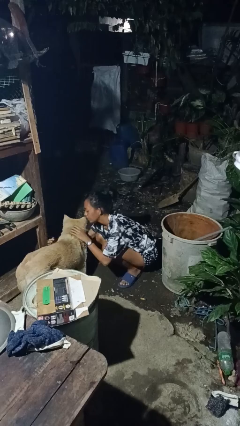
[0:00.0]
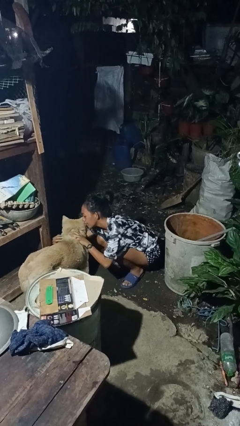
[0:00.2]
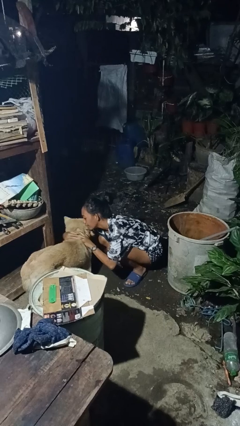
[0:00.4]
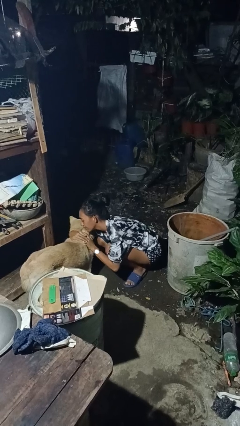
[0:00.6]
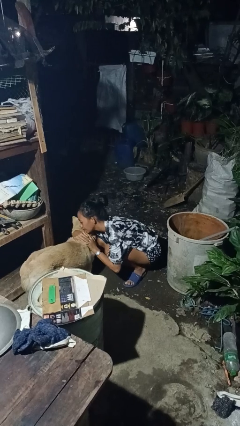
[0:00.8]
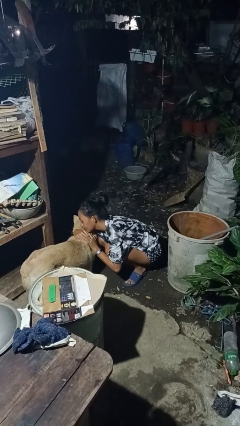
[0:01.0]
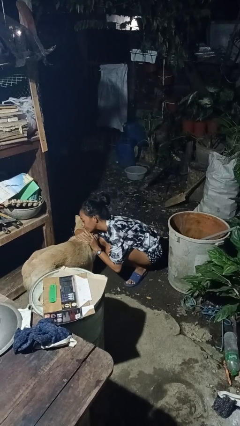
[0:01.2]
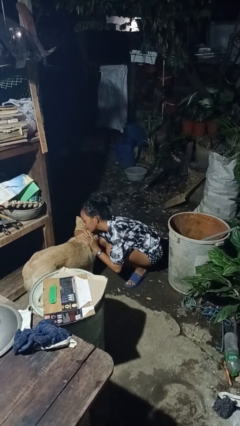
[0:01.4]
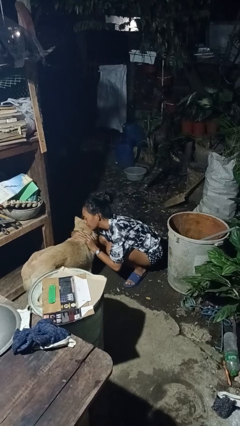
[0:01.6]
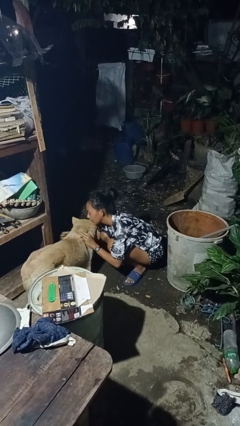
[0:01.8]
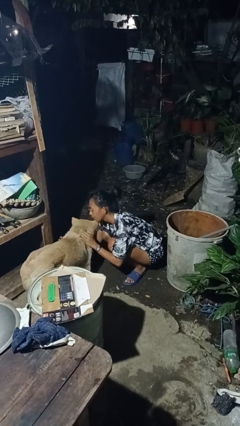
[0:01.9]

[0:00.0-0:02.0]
person hugs dog

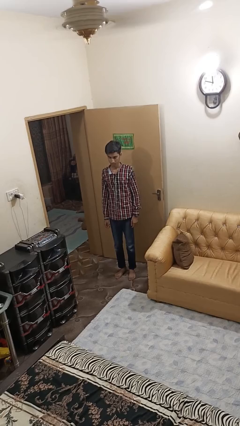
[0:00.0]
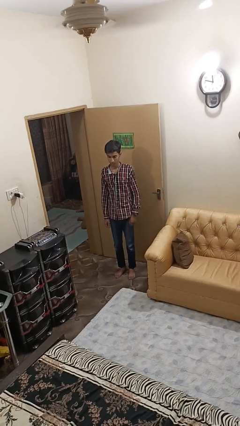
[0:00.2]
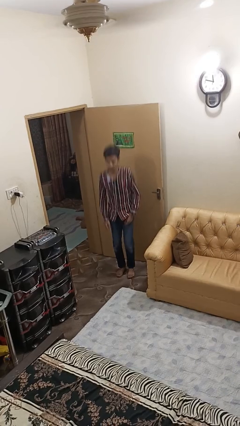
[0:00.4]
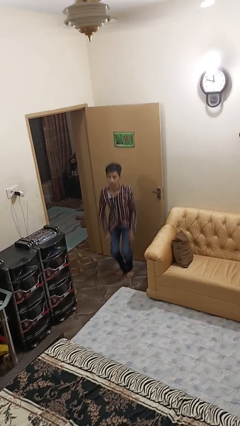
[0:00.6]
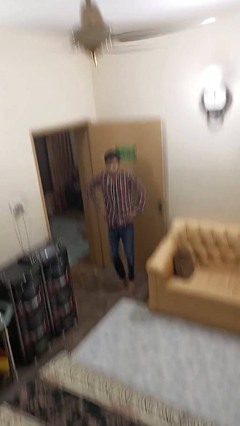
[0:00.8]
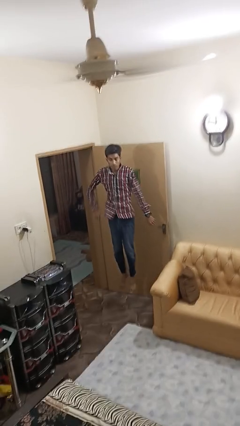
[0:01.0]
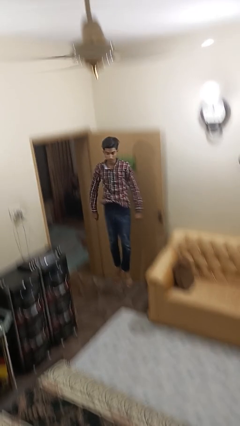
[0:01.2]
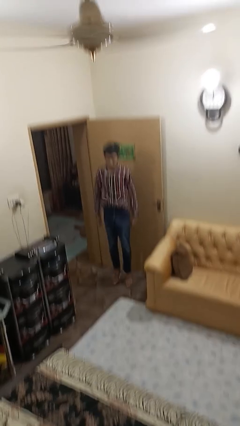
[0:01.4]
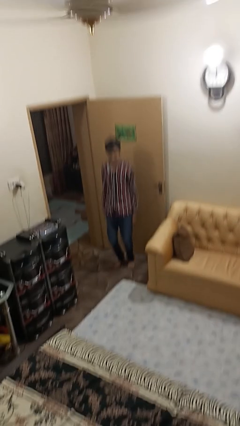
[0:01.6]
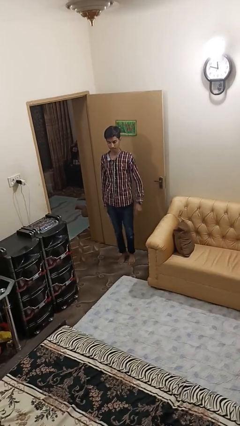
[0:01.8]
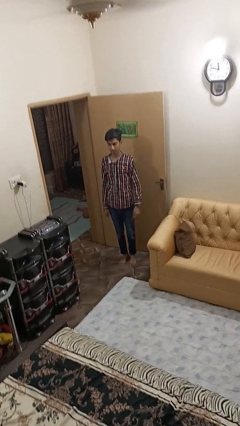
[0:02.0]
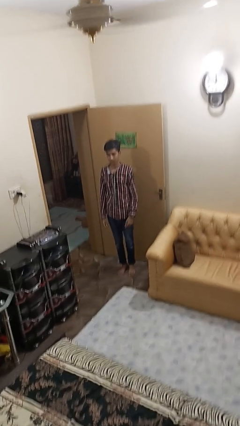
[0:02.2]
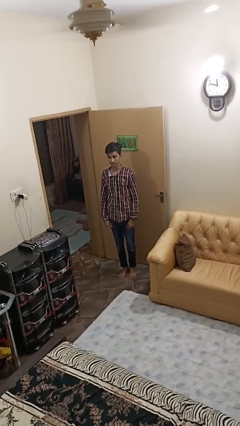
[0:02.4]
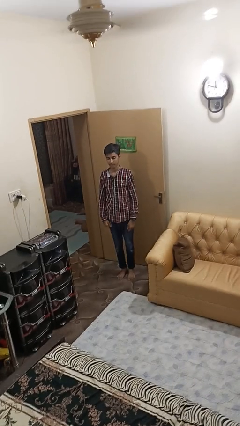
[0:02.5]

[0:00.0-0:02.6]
person jumps

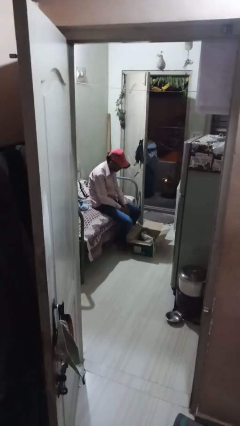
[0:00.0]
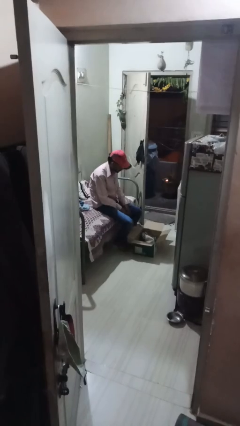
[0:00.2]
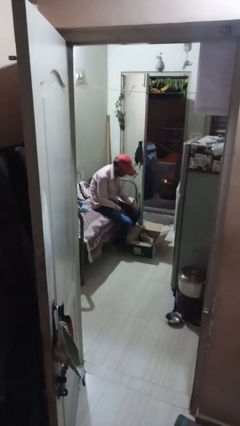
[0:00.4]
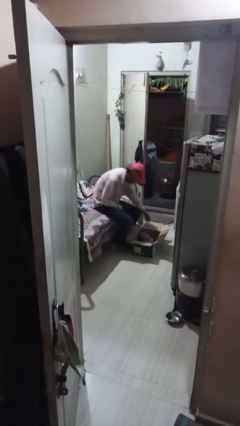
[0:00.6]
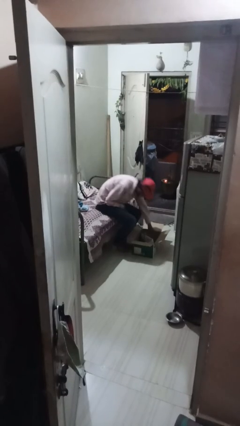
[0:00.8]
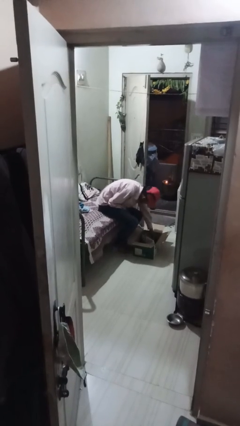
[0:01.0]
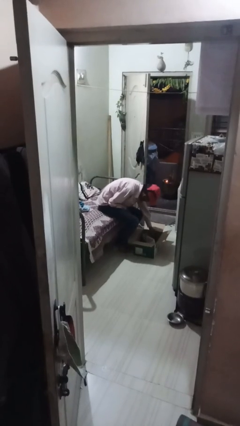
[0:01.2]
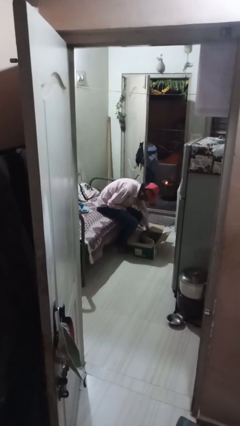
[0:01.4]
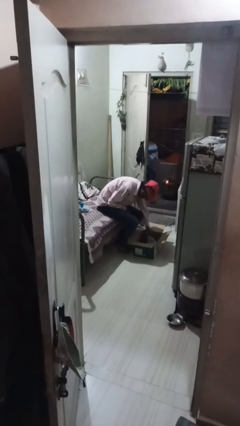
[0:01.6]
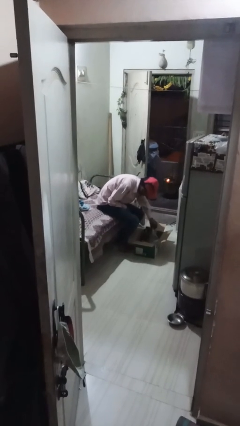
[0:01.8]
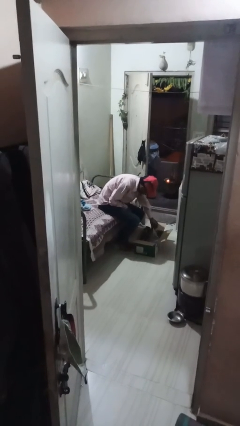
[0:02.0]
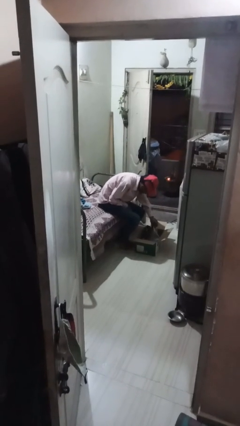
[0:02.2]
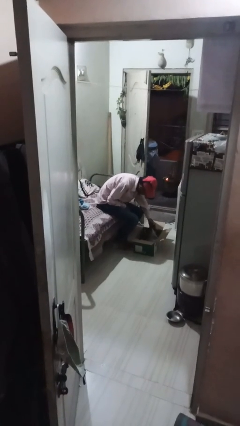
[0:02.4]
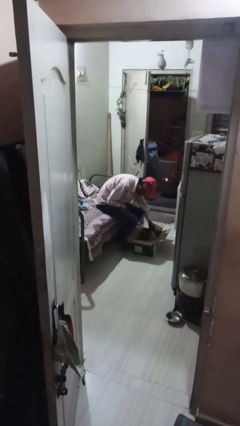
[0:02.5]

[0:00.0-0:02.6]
person searches in box

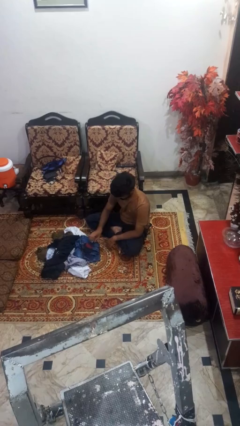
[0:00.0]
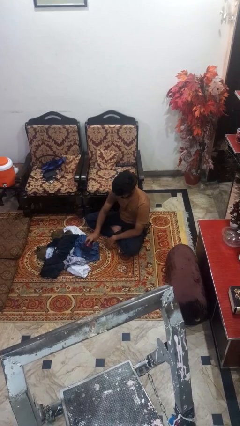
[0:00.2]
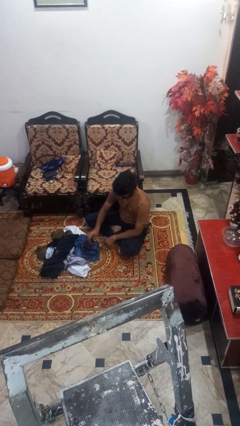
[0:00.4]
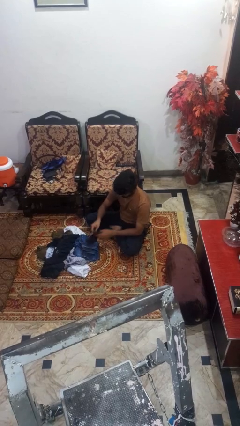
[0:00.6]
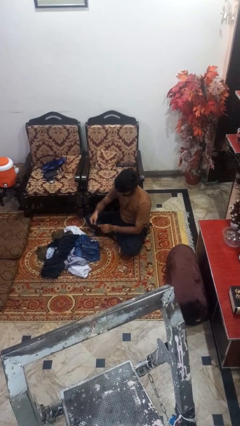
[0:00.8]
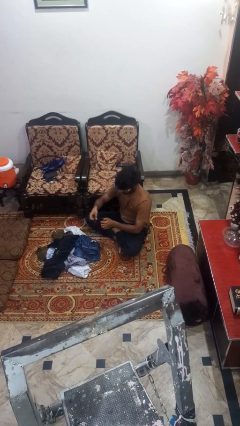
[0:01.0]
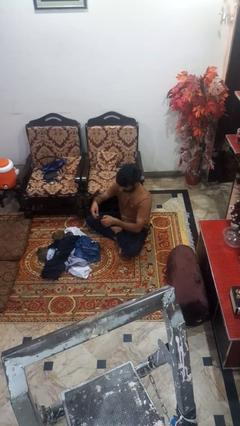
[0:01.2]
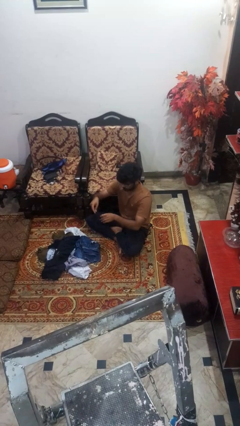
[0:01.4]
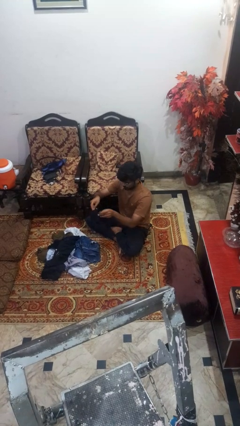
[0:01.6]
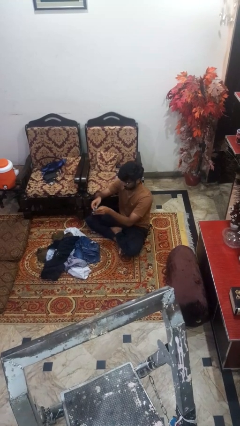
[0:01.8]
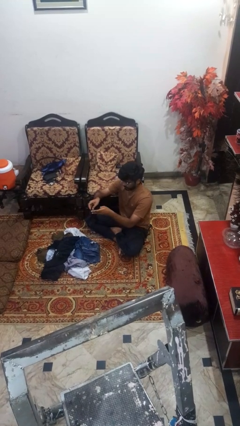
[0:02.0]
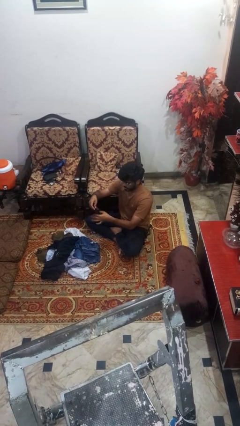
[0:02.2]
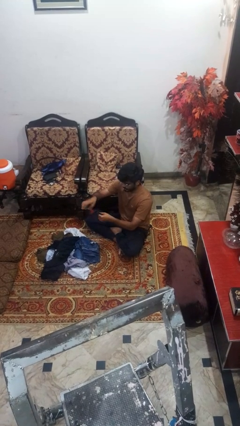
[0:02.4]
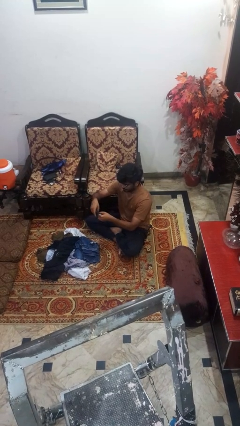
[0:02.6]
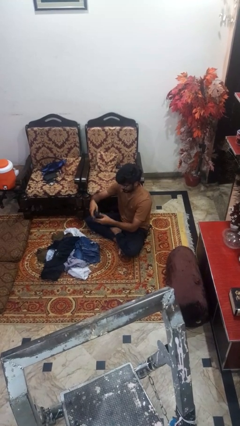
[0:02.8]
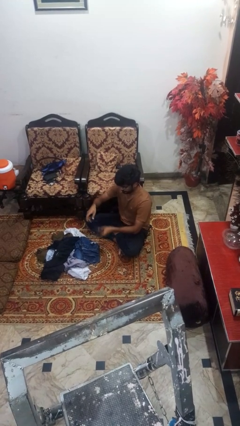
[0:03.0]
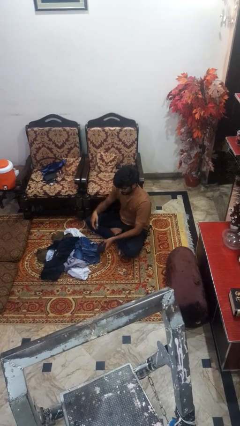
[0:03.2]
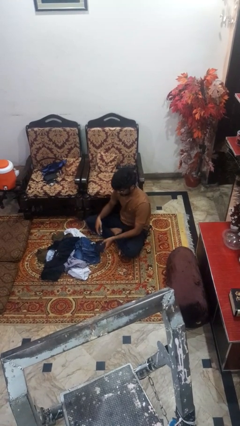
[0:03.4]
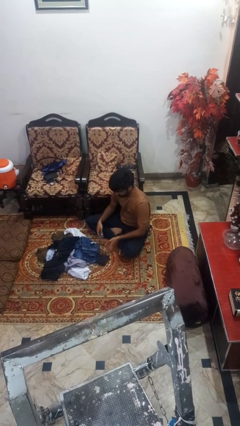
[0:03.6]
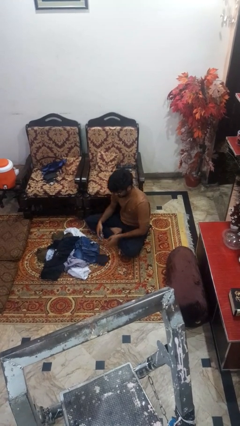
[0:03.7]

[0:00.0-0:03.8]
person folds socks

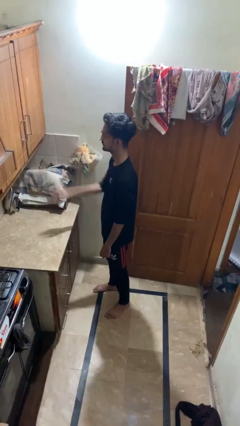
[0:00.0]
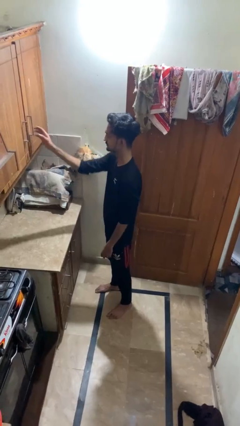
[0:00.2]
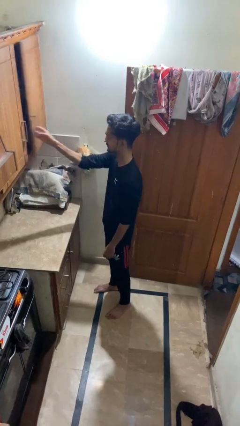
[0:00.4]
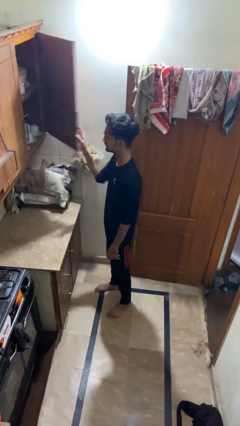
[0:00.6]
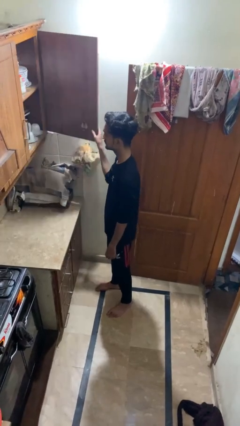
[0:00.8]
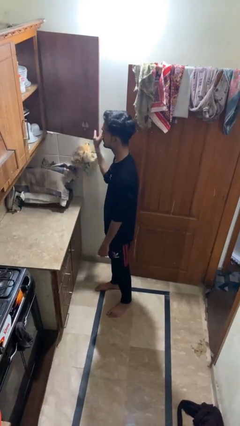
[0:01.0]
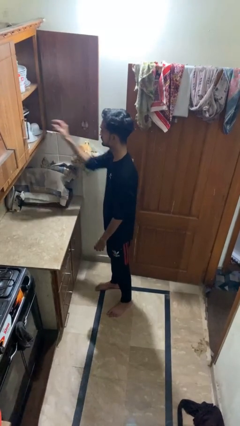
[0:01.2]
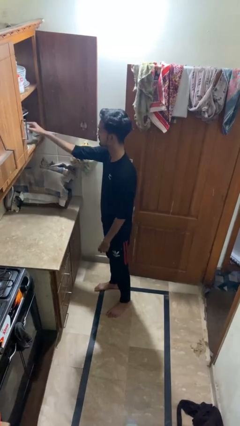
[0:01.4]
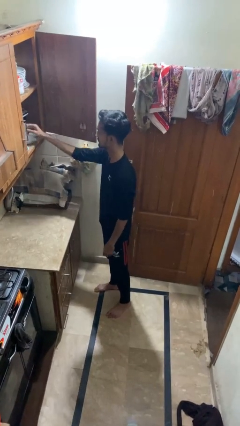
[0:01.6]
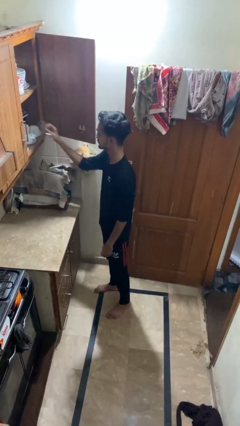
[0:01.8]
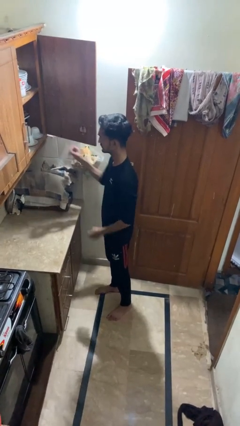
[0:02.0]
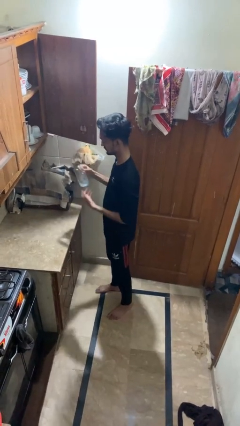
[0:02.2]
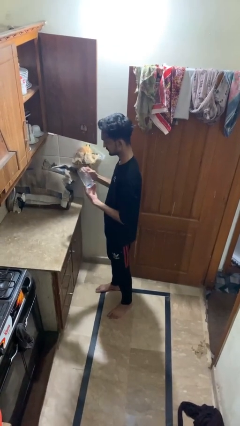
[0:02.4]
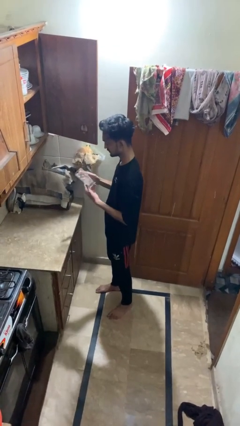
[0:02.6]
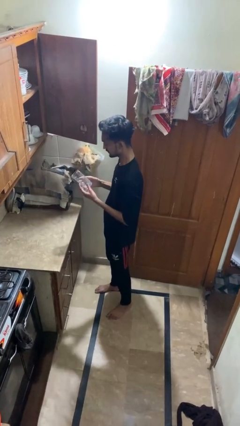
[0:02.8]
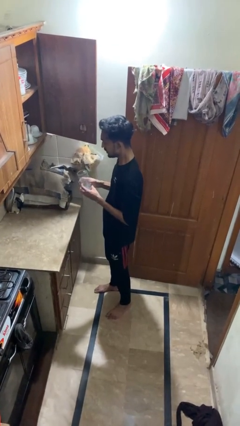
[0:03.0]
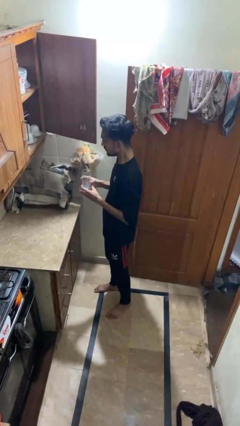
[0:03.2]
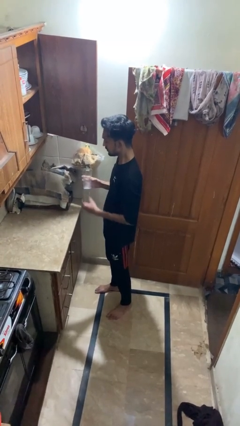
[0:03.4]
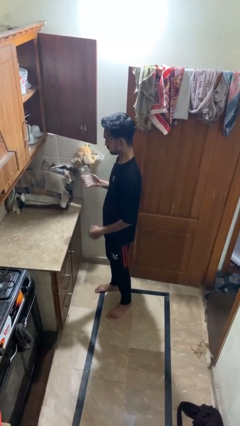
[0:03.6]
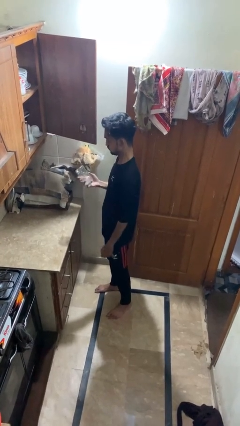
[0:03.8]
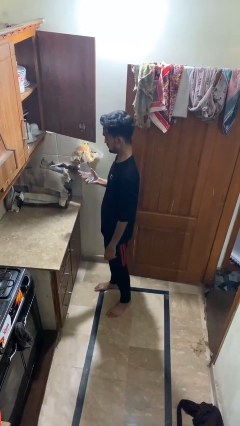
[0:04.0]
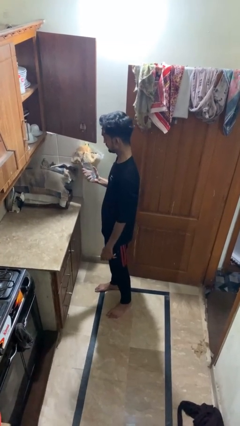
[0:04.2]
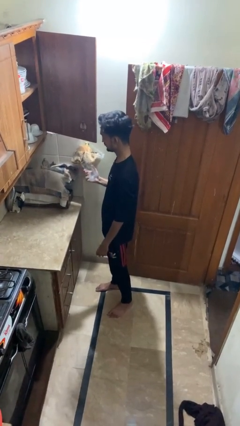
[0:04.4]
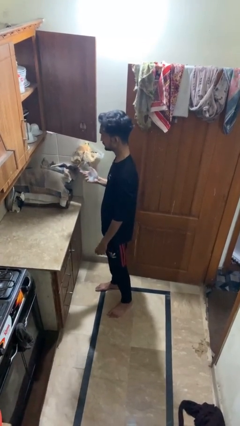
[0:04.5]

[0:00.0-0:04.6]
person puts object in cabinet

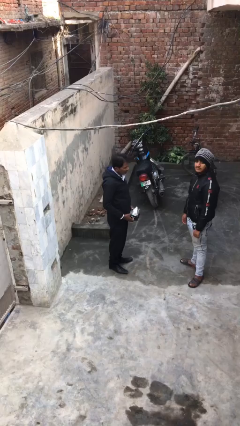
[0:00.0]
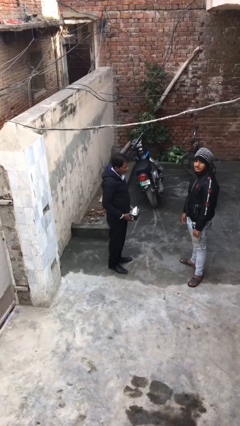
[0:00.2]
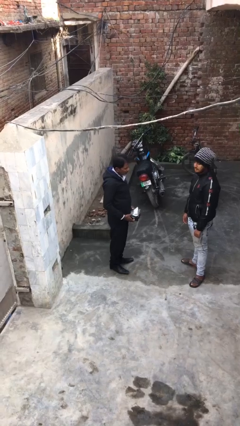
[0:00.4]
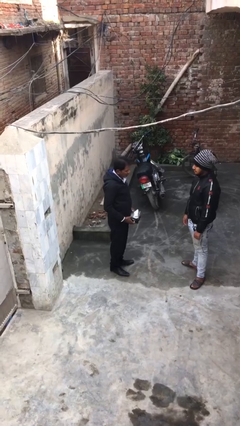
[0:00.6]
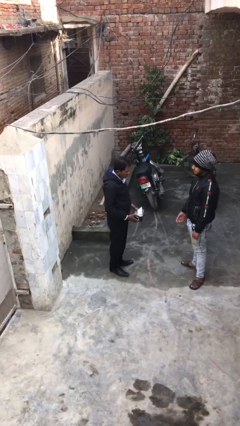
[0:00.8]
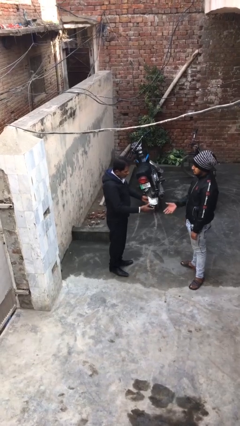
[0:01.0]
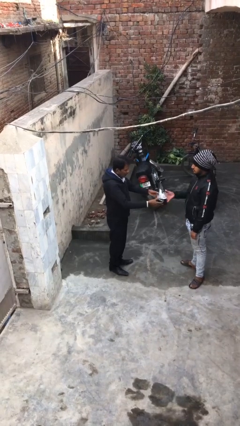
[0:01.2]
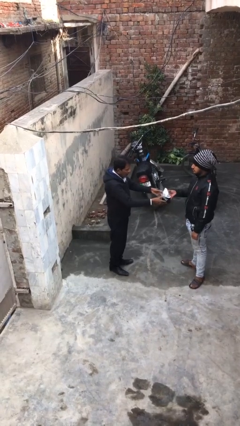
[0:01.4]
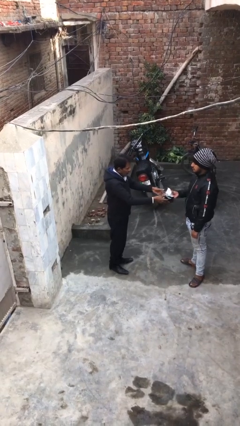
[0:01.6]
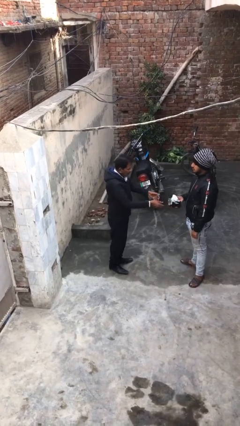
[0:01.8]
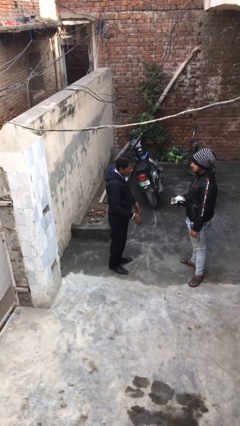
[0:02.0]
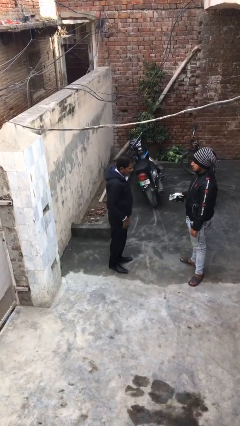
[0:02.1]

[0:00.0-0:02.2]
person transfers object to person
